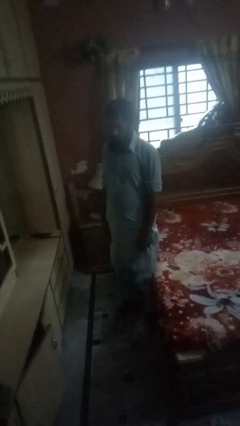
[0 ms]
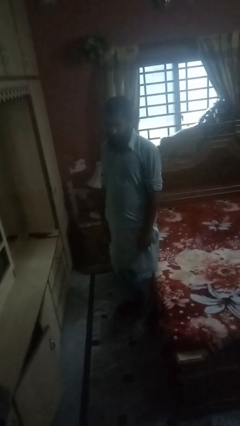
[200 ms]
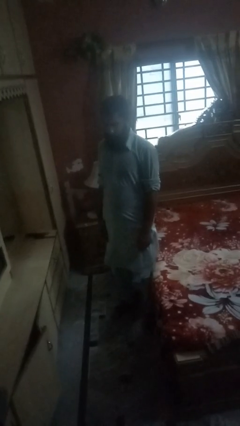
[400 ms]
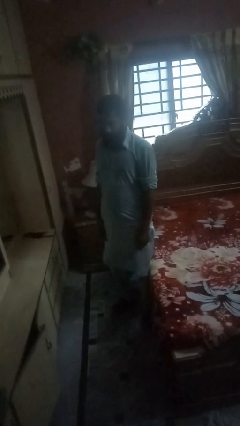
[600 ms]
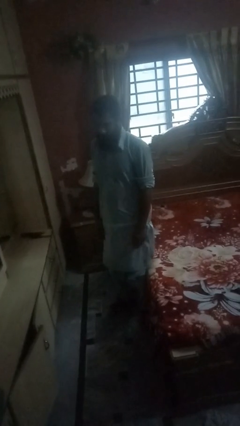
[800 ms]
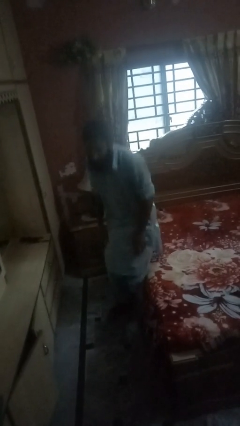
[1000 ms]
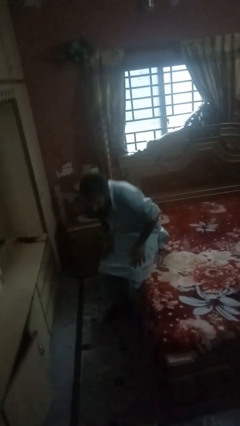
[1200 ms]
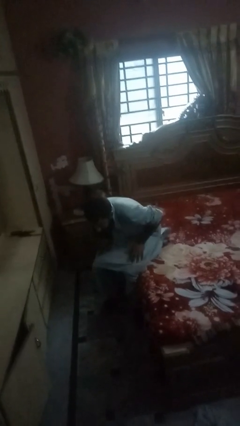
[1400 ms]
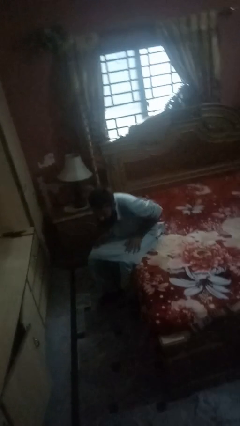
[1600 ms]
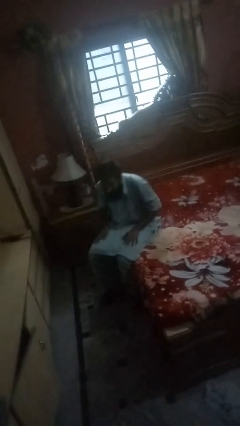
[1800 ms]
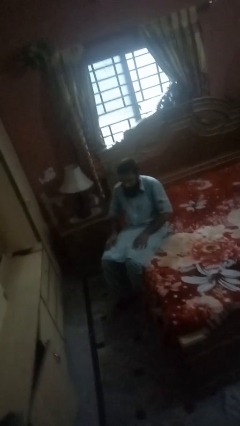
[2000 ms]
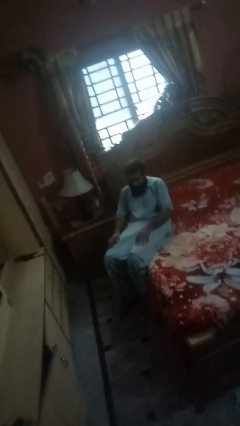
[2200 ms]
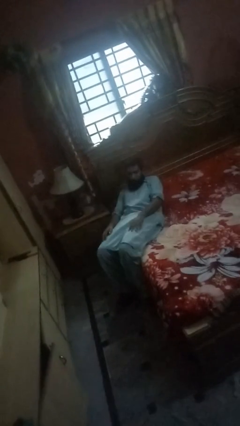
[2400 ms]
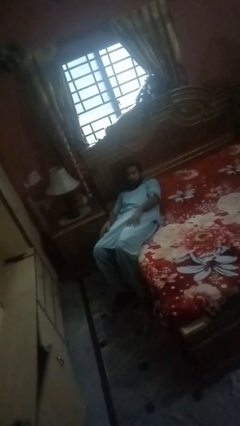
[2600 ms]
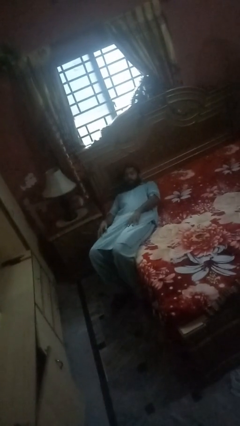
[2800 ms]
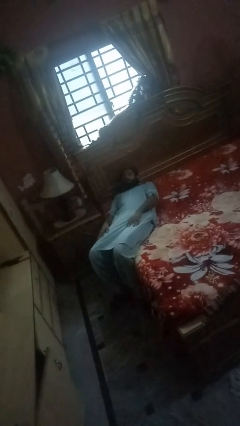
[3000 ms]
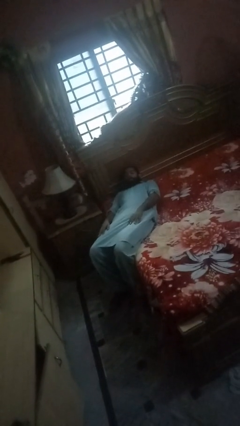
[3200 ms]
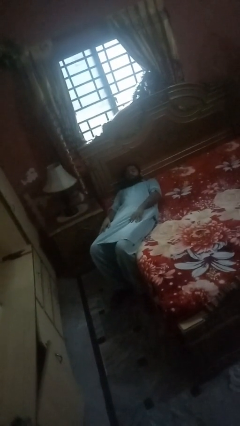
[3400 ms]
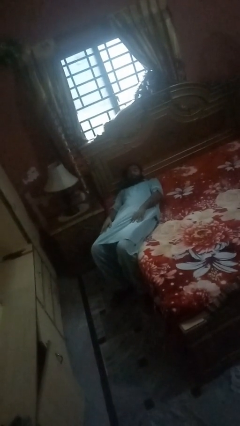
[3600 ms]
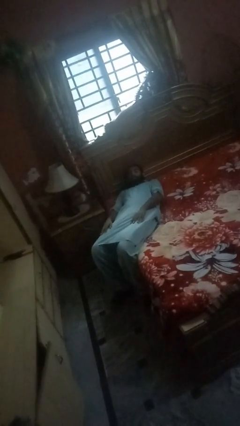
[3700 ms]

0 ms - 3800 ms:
person lies down on bed

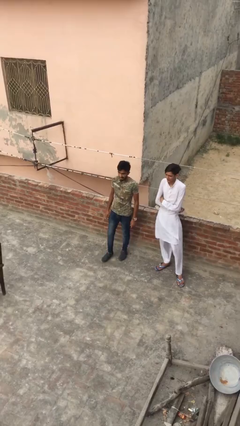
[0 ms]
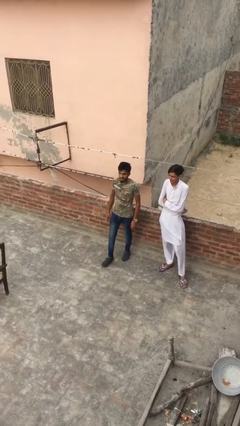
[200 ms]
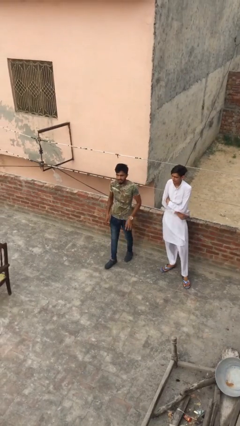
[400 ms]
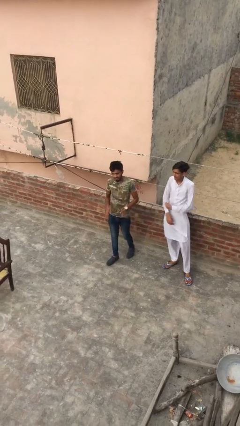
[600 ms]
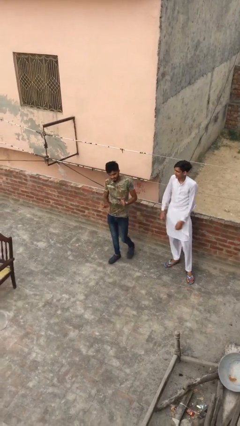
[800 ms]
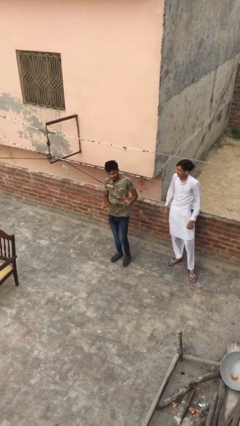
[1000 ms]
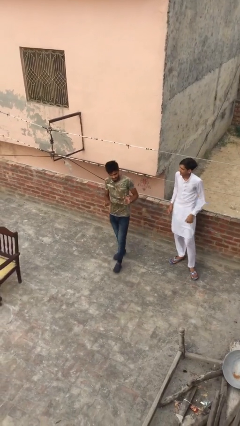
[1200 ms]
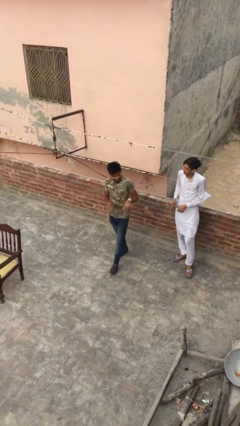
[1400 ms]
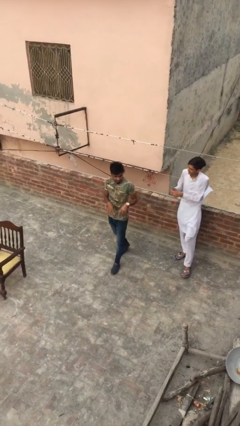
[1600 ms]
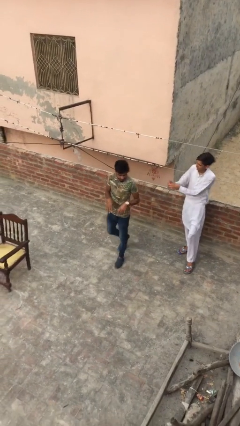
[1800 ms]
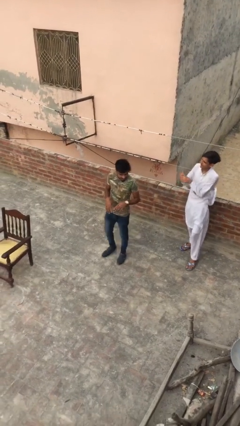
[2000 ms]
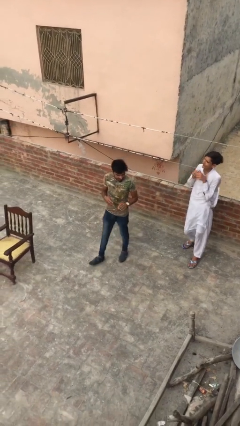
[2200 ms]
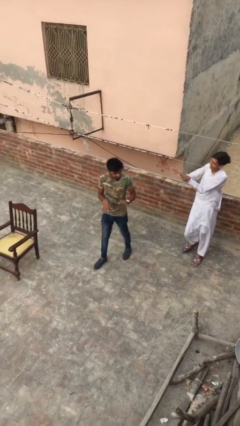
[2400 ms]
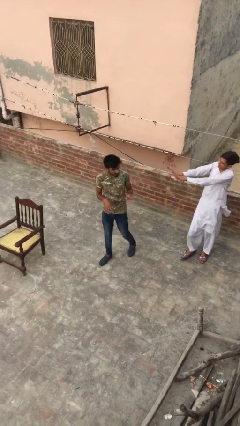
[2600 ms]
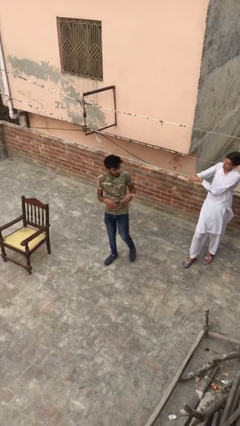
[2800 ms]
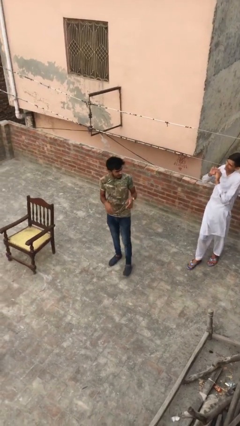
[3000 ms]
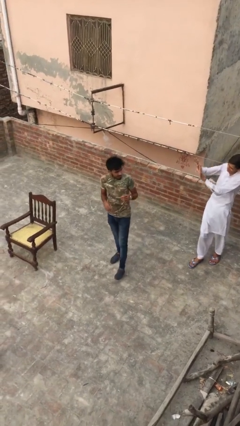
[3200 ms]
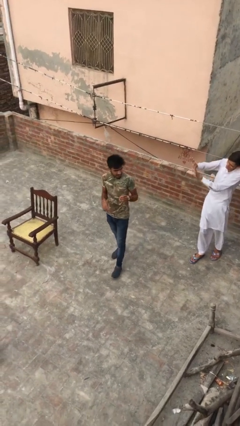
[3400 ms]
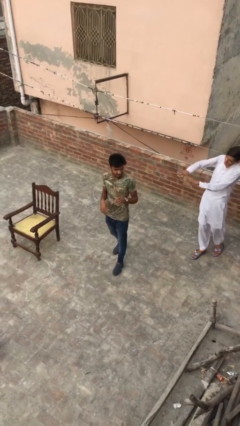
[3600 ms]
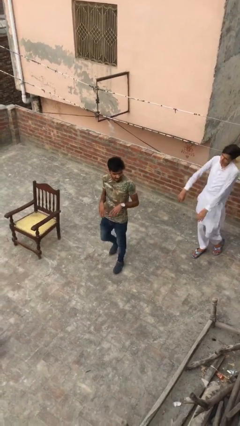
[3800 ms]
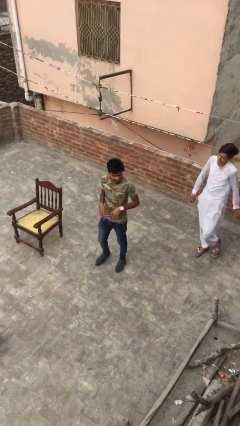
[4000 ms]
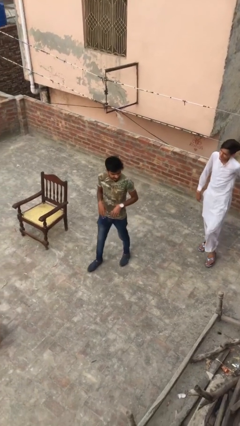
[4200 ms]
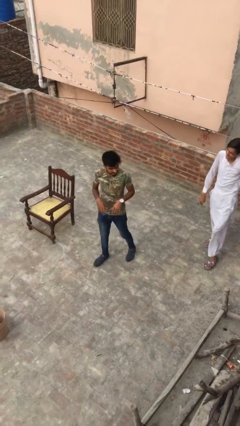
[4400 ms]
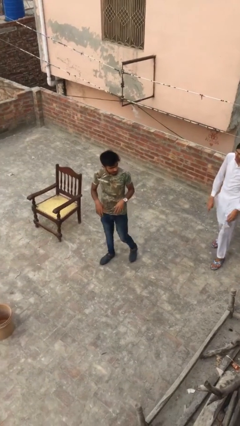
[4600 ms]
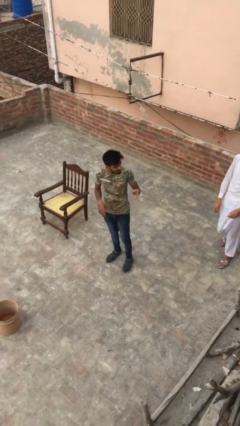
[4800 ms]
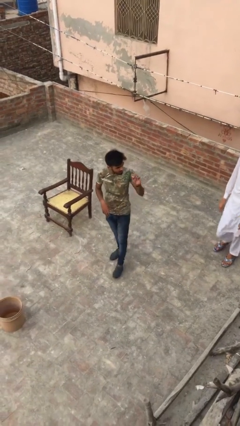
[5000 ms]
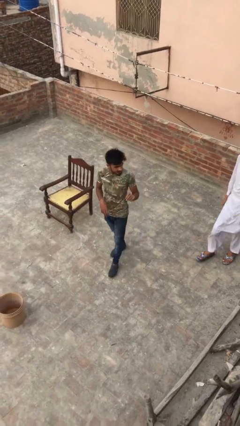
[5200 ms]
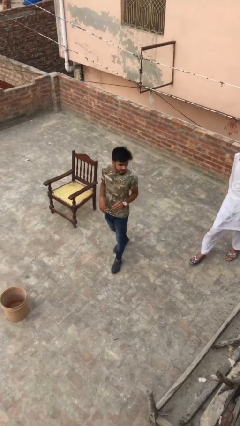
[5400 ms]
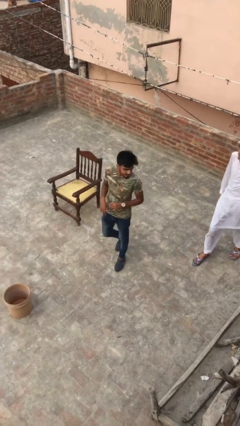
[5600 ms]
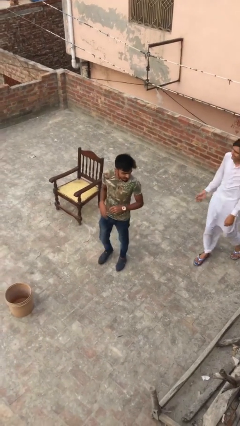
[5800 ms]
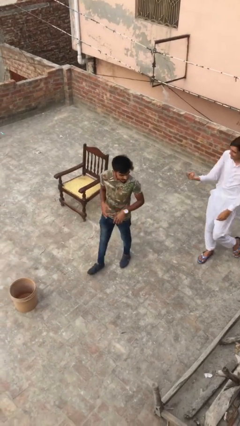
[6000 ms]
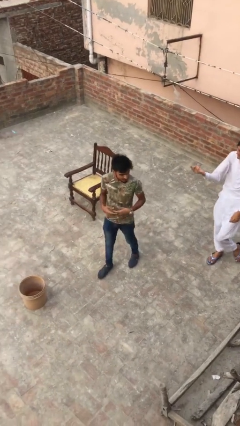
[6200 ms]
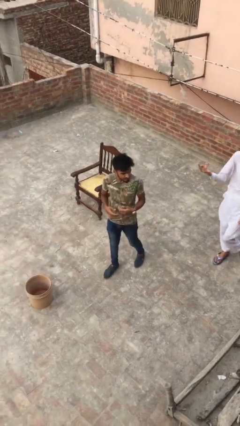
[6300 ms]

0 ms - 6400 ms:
person talks to person

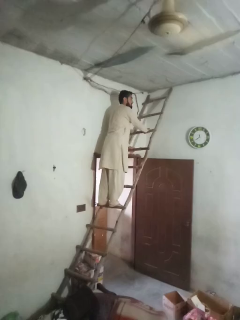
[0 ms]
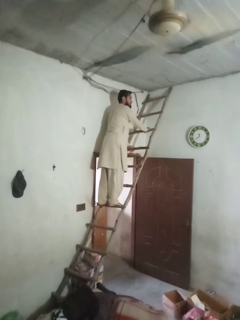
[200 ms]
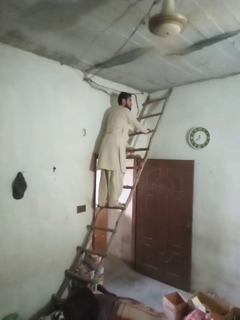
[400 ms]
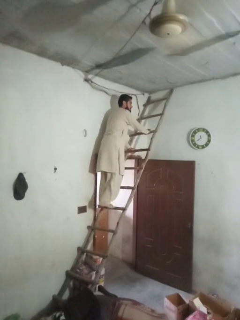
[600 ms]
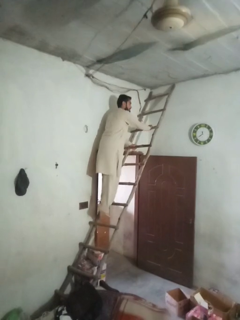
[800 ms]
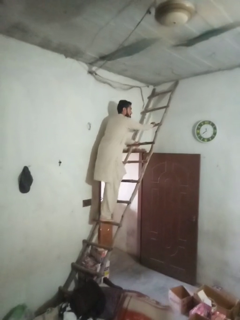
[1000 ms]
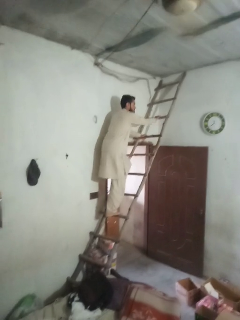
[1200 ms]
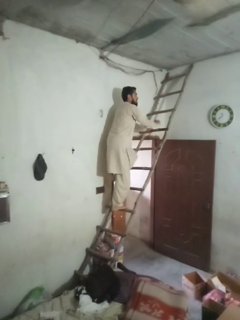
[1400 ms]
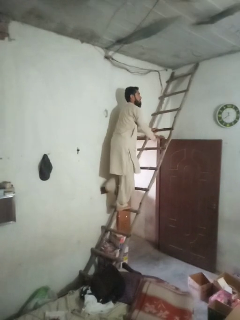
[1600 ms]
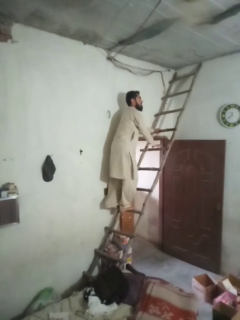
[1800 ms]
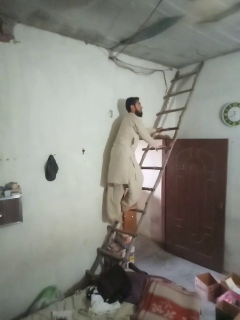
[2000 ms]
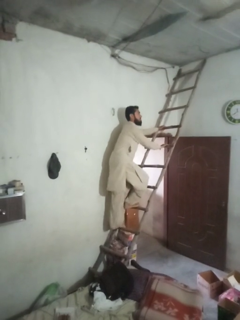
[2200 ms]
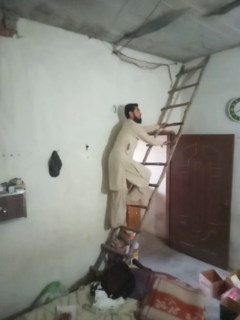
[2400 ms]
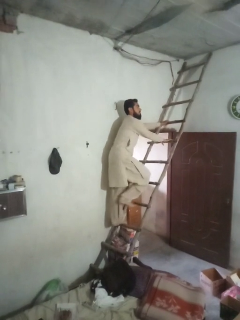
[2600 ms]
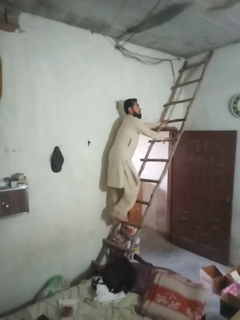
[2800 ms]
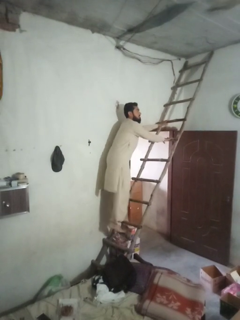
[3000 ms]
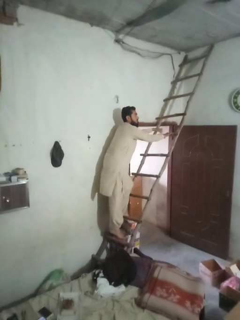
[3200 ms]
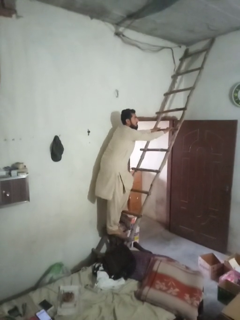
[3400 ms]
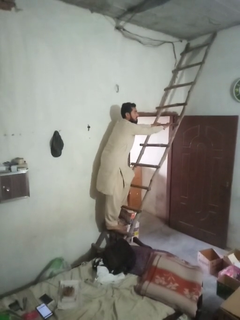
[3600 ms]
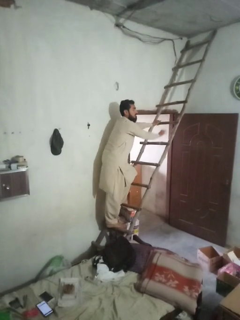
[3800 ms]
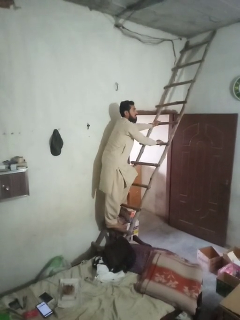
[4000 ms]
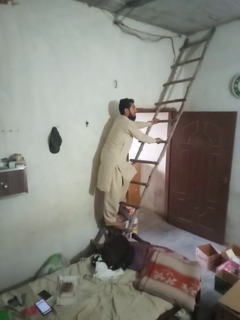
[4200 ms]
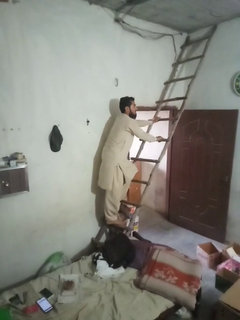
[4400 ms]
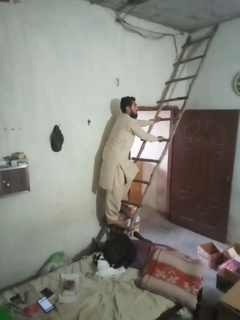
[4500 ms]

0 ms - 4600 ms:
person climbs down ladder

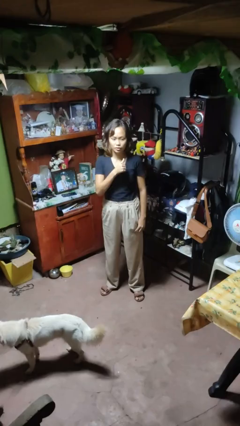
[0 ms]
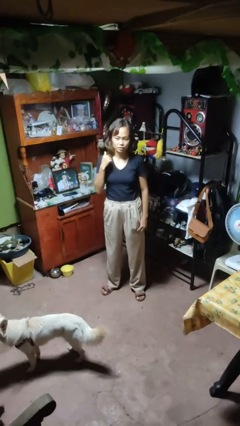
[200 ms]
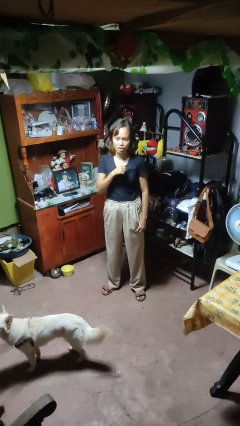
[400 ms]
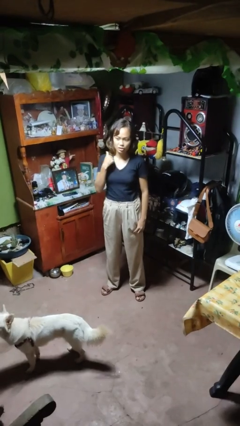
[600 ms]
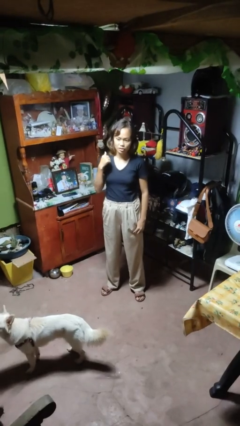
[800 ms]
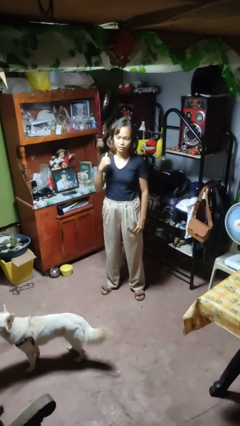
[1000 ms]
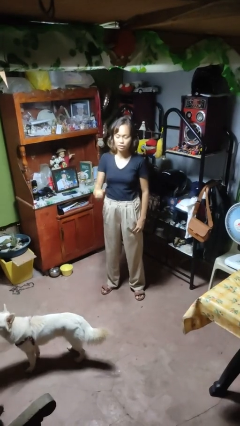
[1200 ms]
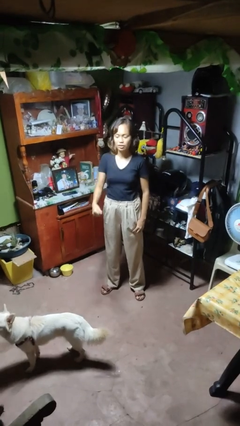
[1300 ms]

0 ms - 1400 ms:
person gestures cut

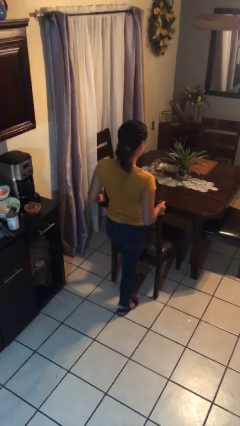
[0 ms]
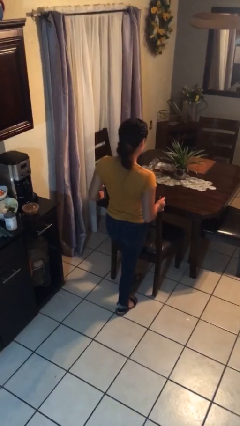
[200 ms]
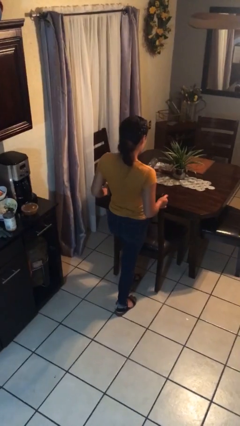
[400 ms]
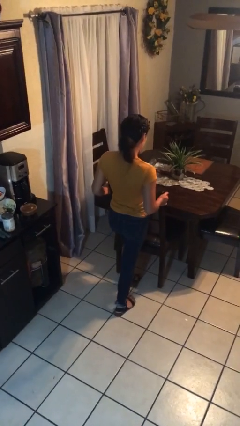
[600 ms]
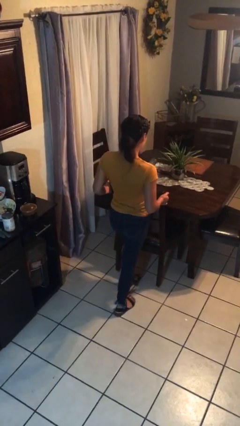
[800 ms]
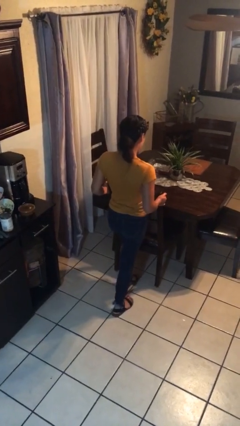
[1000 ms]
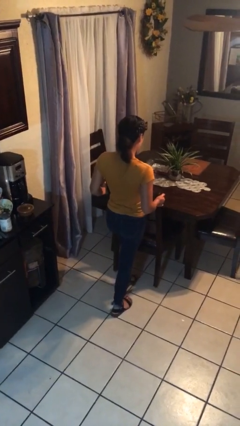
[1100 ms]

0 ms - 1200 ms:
person pushes in chair

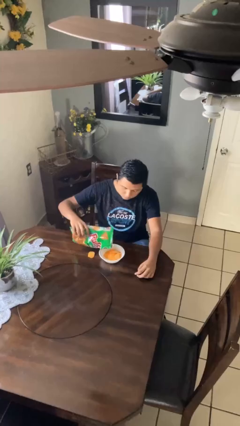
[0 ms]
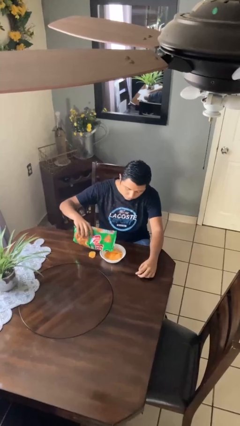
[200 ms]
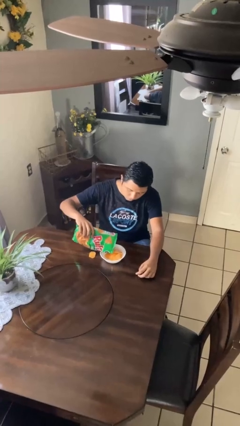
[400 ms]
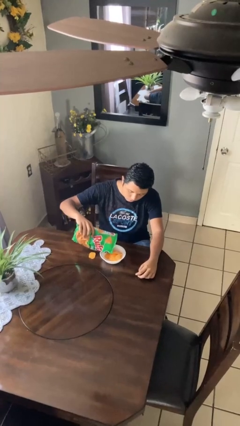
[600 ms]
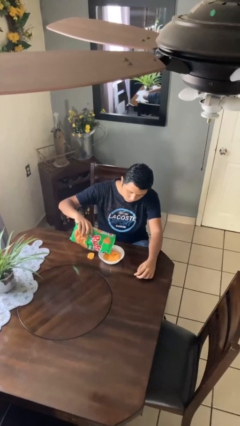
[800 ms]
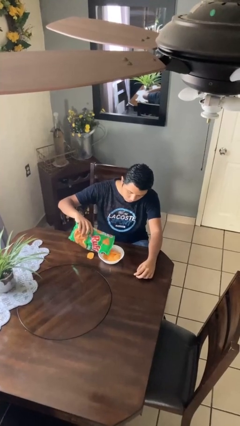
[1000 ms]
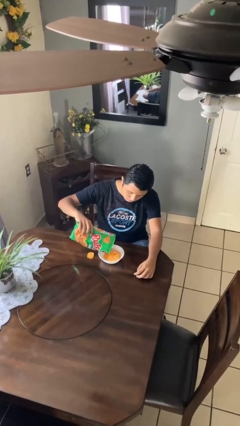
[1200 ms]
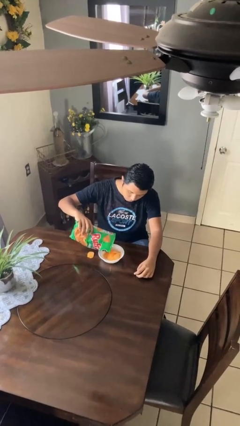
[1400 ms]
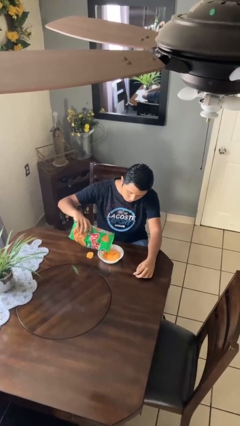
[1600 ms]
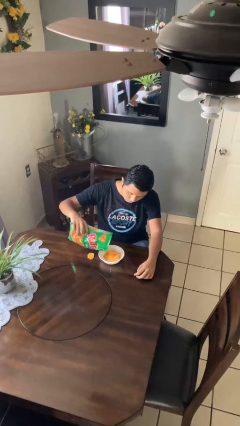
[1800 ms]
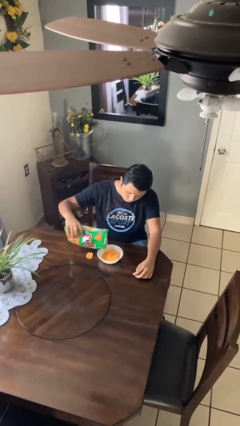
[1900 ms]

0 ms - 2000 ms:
person pours into bowl
